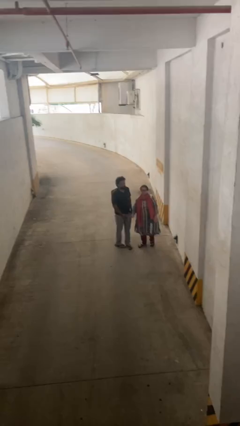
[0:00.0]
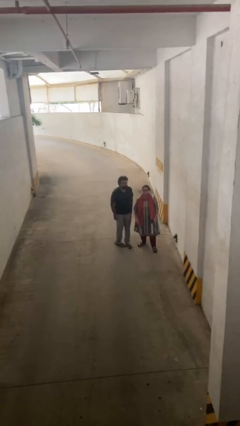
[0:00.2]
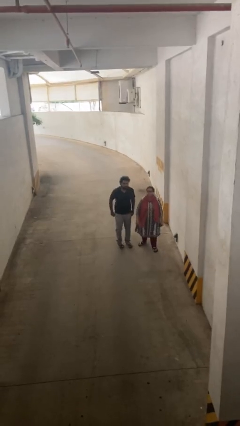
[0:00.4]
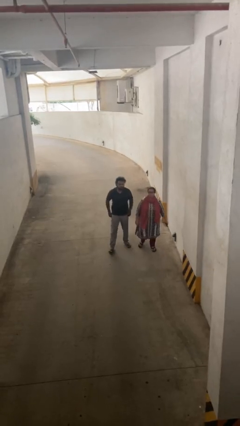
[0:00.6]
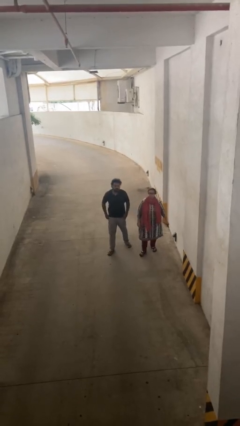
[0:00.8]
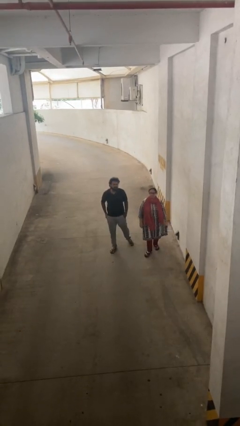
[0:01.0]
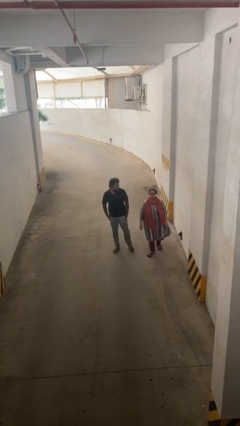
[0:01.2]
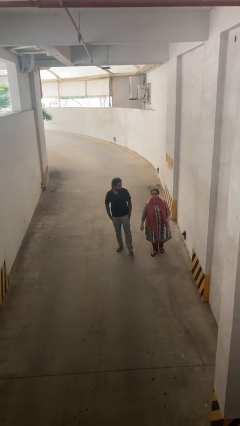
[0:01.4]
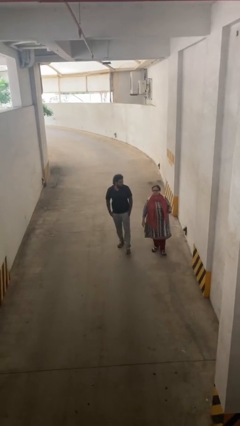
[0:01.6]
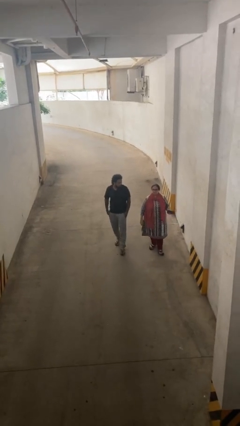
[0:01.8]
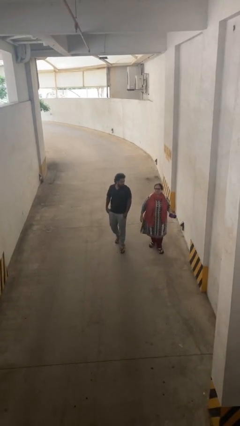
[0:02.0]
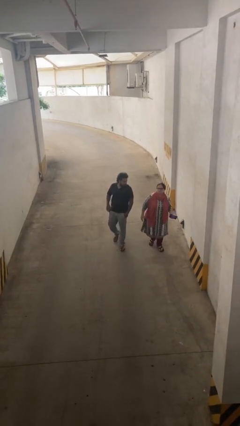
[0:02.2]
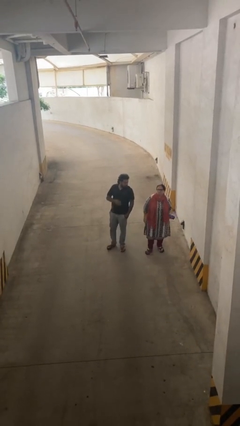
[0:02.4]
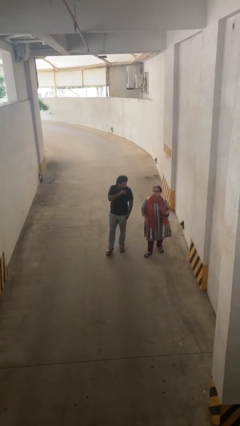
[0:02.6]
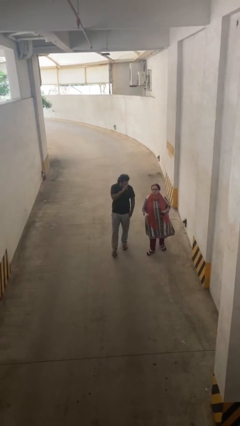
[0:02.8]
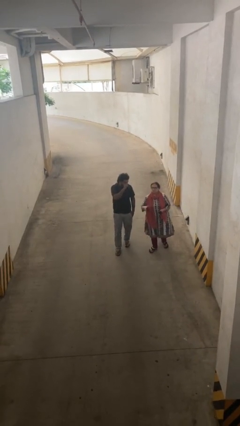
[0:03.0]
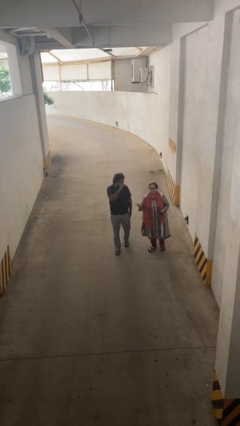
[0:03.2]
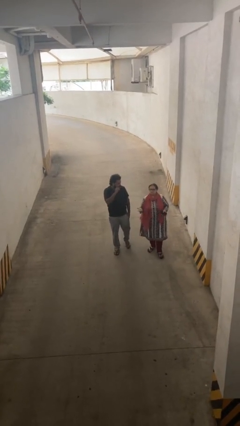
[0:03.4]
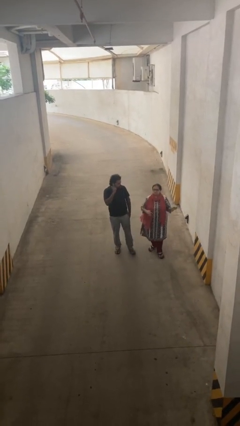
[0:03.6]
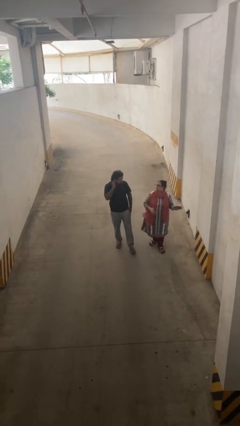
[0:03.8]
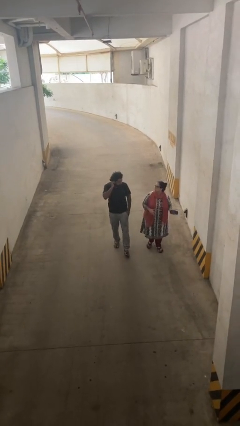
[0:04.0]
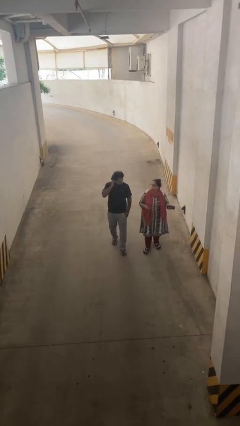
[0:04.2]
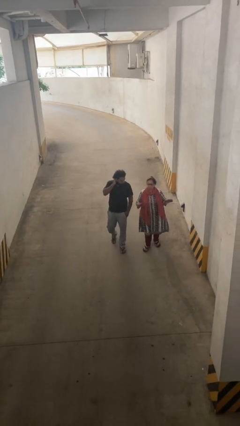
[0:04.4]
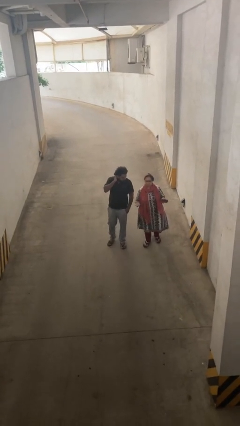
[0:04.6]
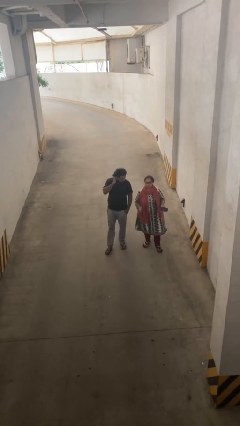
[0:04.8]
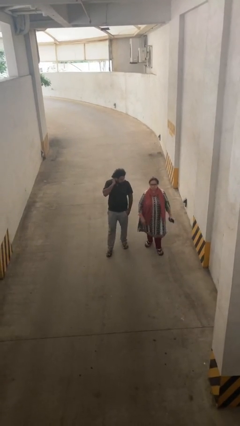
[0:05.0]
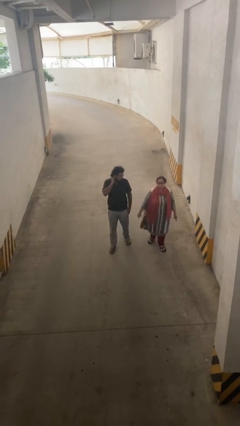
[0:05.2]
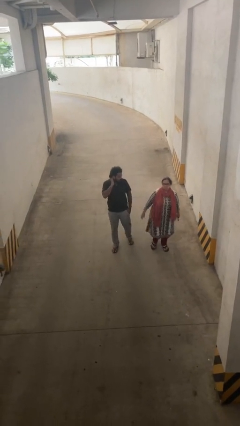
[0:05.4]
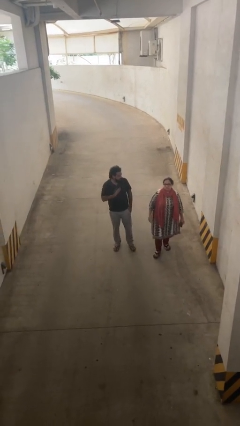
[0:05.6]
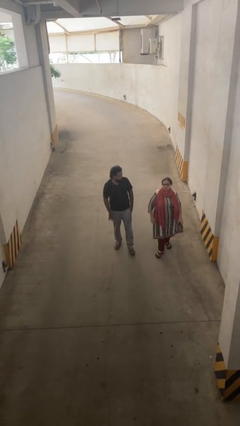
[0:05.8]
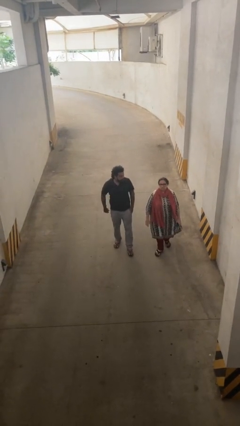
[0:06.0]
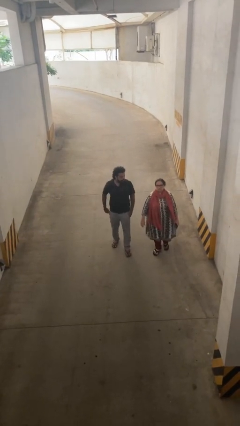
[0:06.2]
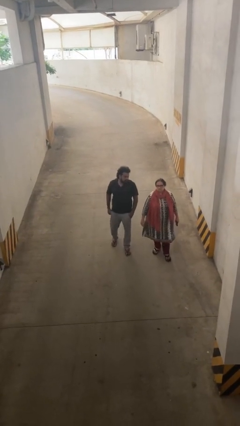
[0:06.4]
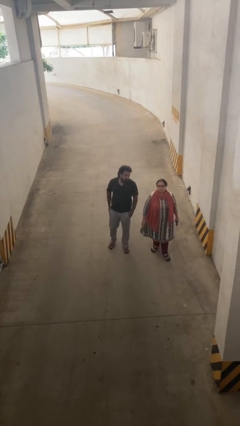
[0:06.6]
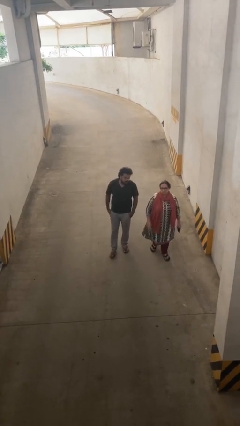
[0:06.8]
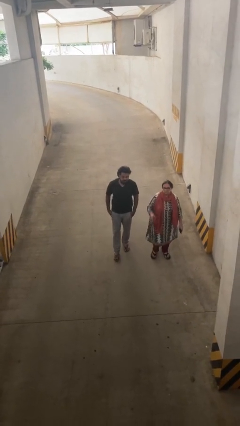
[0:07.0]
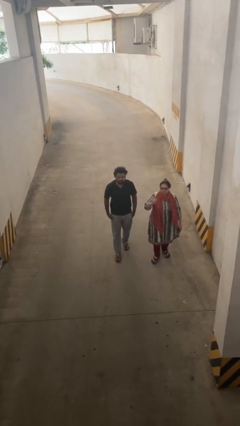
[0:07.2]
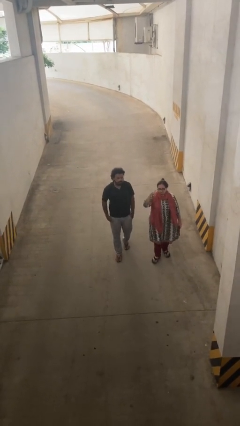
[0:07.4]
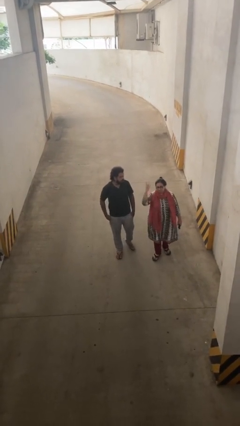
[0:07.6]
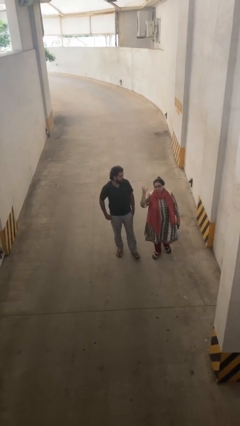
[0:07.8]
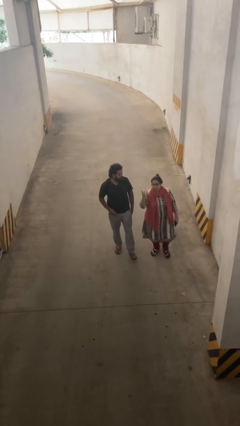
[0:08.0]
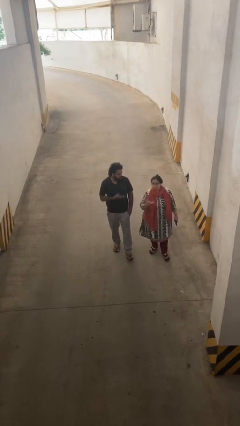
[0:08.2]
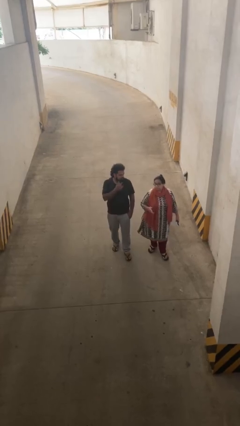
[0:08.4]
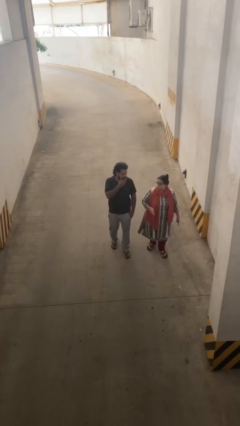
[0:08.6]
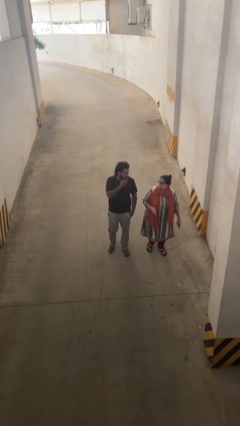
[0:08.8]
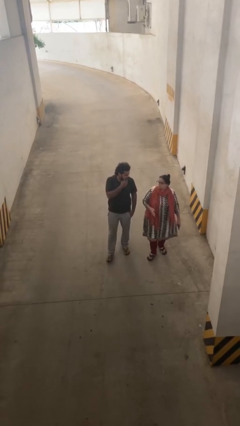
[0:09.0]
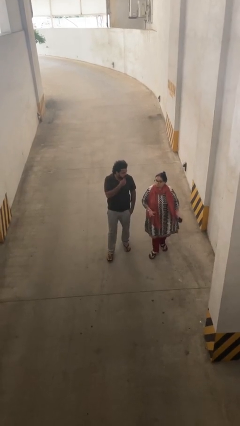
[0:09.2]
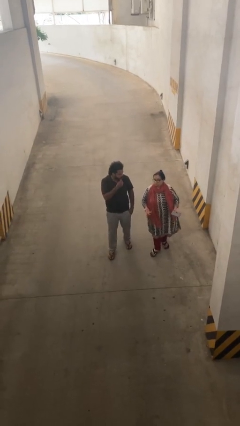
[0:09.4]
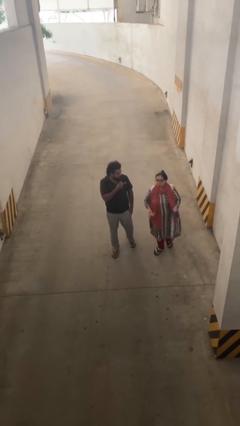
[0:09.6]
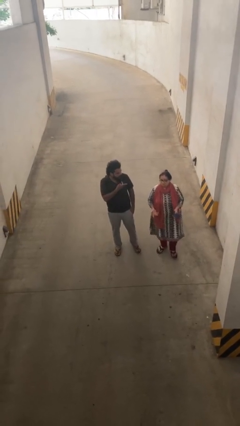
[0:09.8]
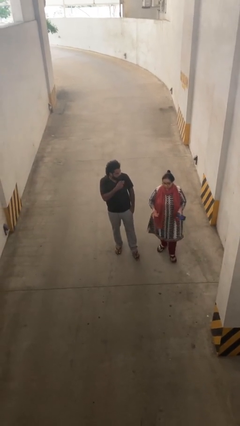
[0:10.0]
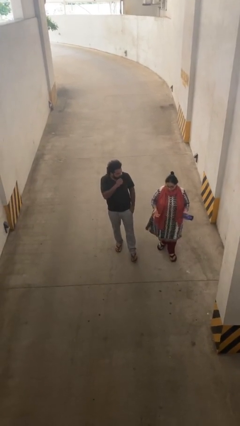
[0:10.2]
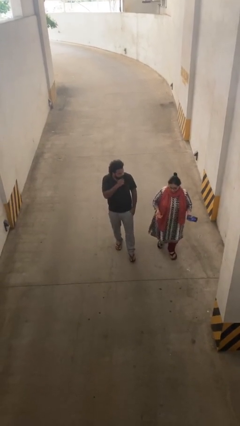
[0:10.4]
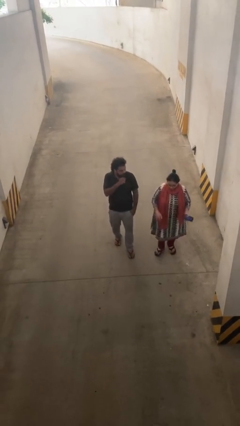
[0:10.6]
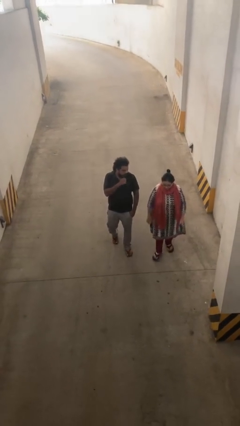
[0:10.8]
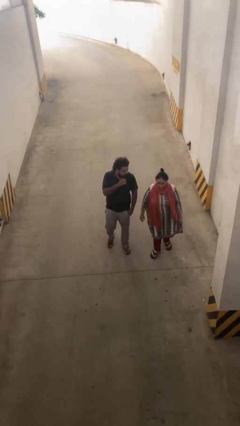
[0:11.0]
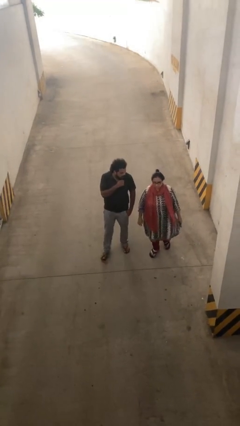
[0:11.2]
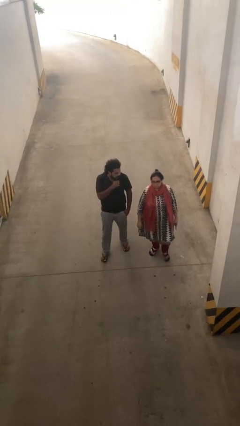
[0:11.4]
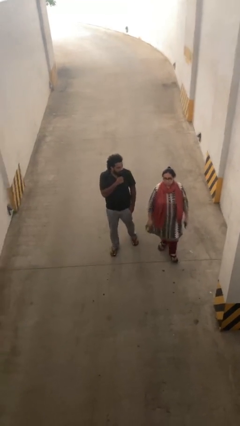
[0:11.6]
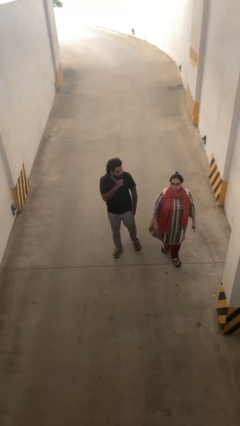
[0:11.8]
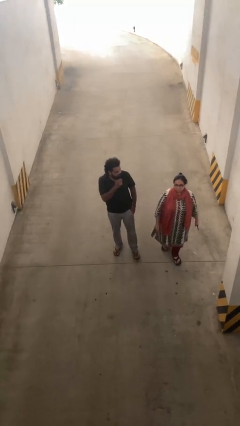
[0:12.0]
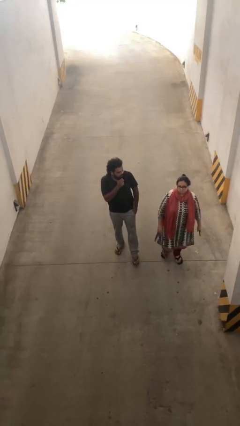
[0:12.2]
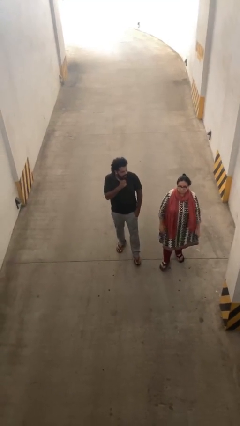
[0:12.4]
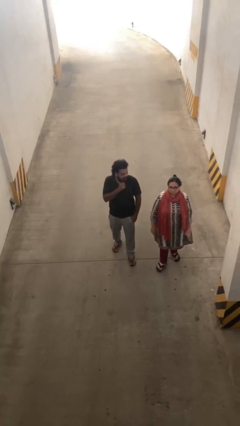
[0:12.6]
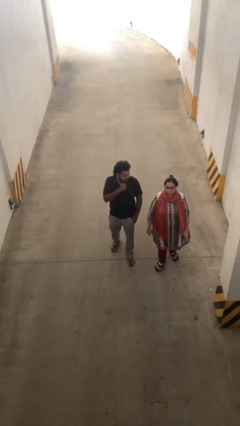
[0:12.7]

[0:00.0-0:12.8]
person talks to person

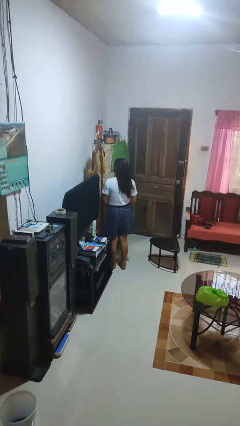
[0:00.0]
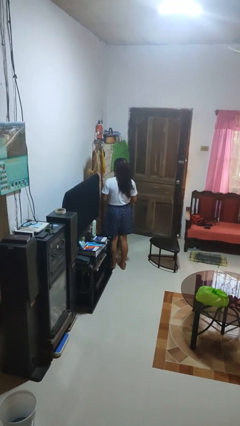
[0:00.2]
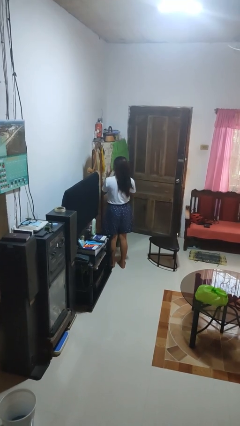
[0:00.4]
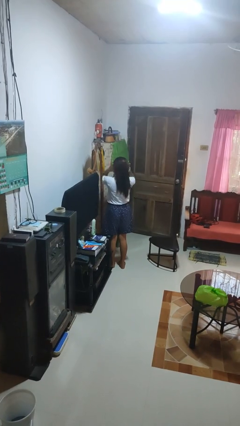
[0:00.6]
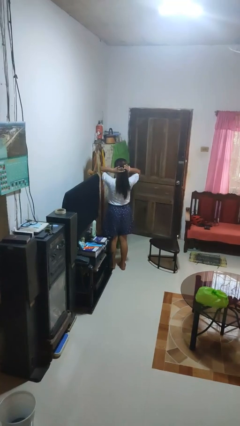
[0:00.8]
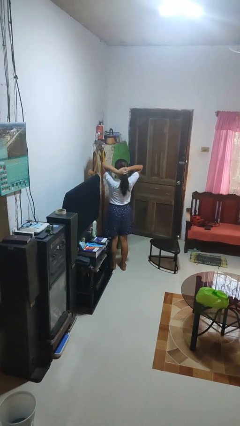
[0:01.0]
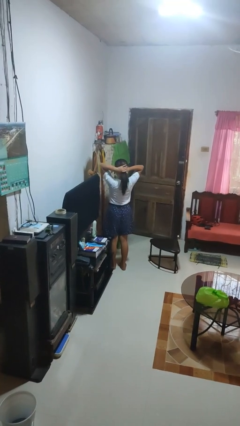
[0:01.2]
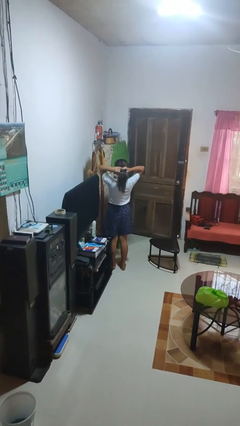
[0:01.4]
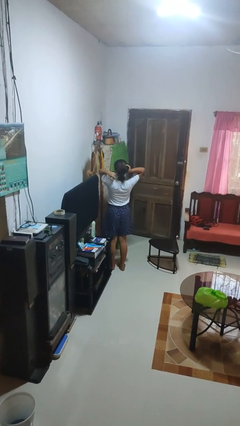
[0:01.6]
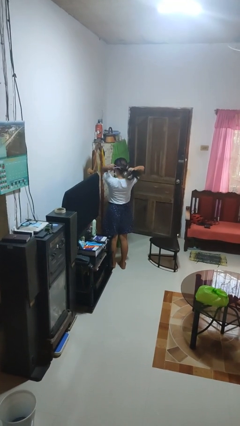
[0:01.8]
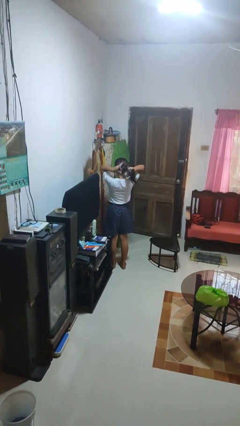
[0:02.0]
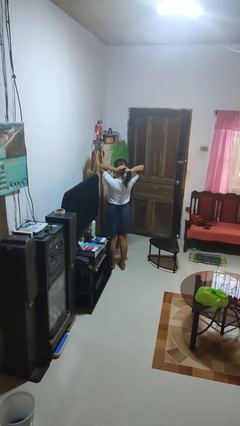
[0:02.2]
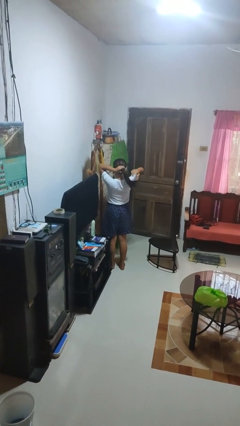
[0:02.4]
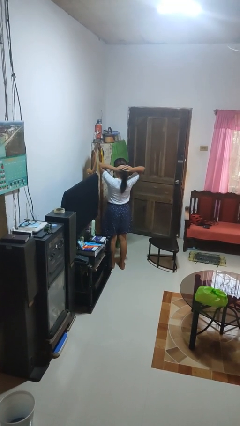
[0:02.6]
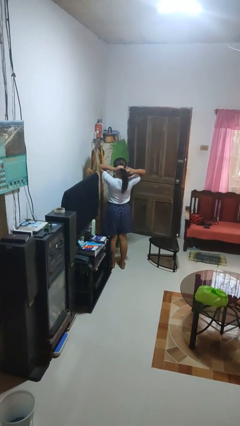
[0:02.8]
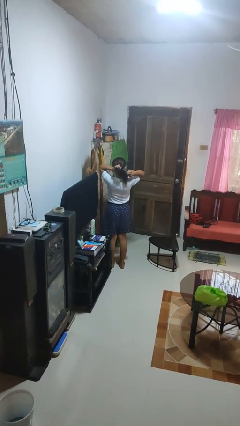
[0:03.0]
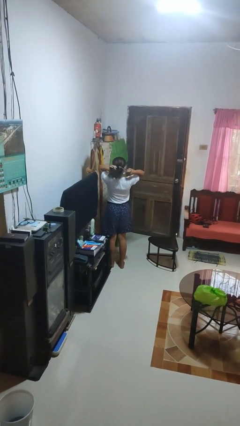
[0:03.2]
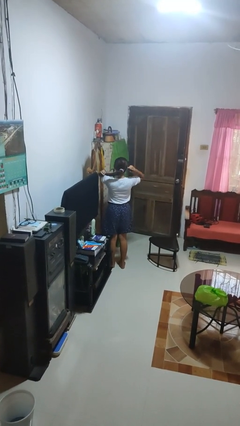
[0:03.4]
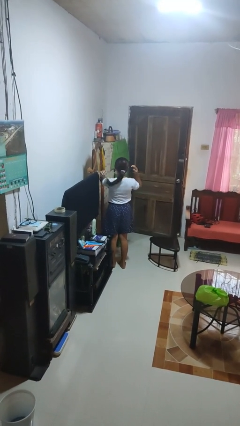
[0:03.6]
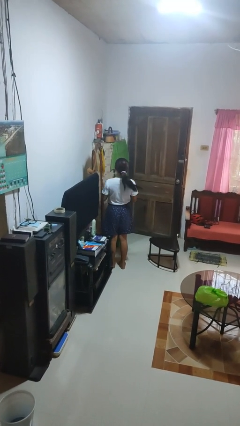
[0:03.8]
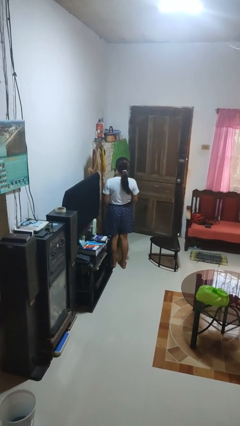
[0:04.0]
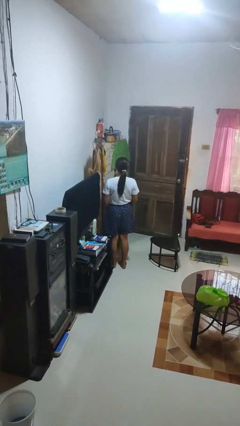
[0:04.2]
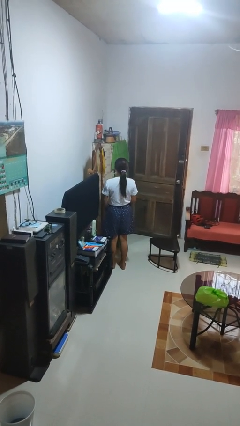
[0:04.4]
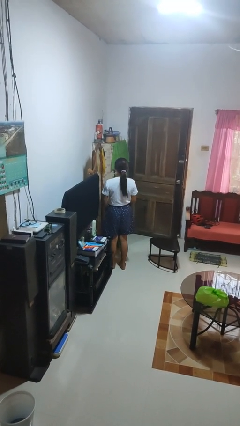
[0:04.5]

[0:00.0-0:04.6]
person puts hair in ponytail

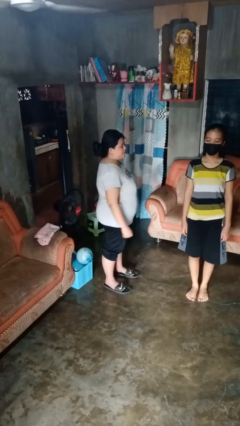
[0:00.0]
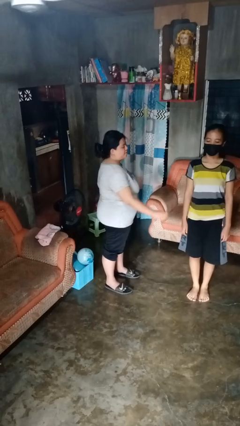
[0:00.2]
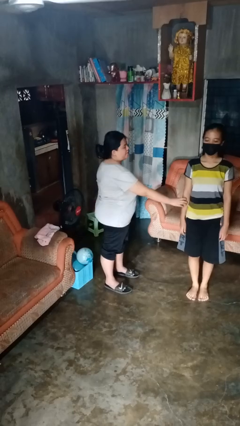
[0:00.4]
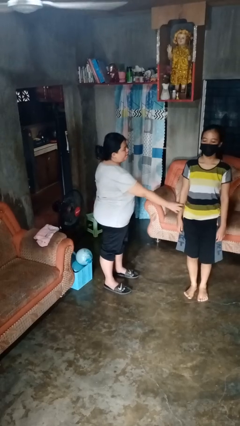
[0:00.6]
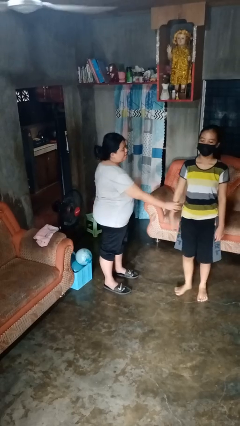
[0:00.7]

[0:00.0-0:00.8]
person grabs person by forearm
